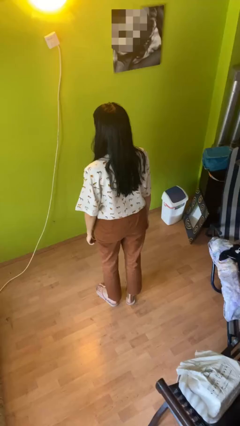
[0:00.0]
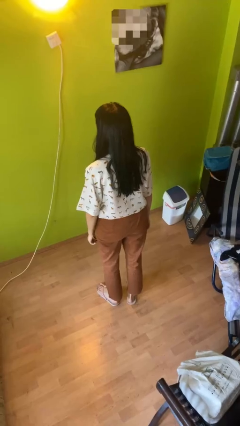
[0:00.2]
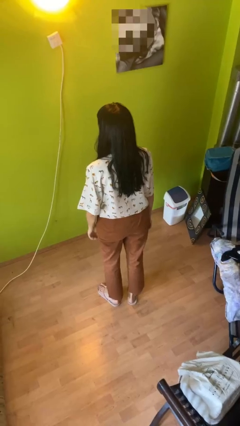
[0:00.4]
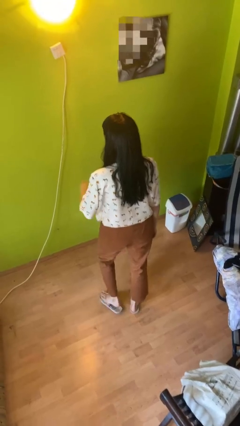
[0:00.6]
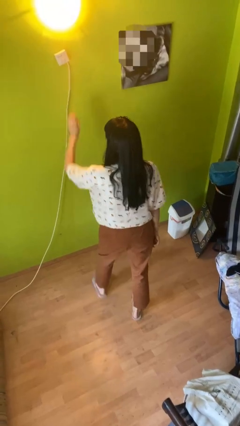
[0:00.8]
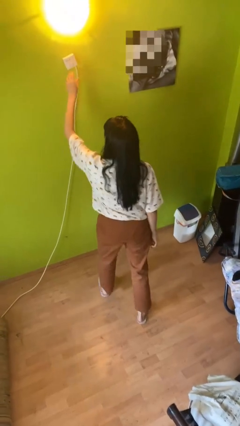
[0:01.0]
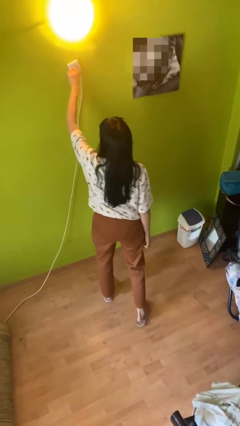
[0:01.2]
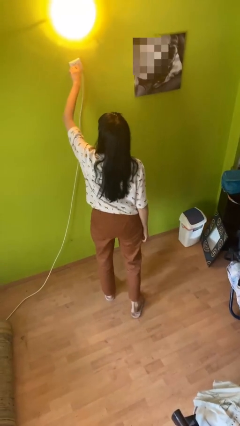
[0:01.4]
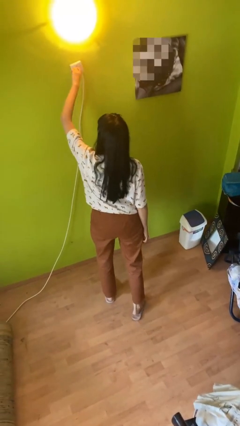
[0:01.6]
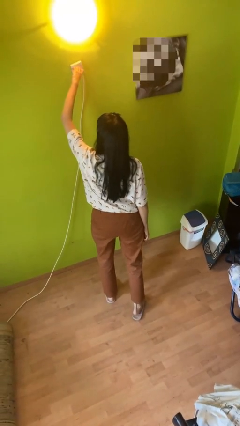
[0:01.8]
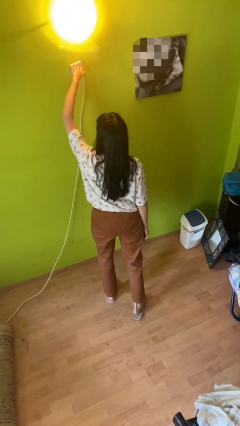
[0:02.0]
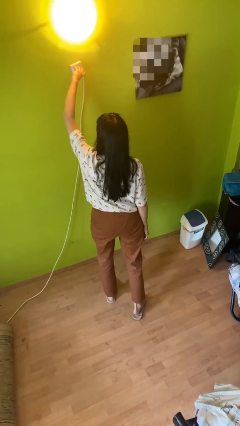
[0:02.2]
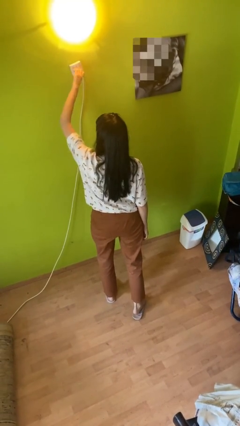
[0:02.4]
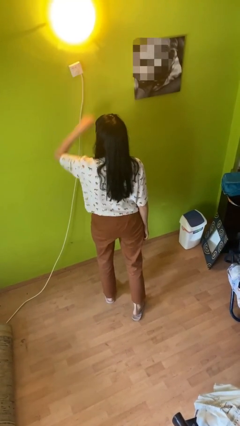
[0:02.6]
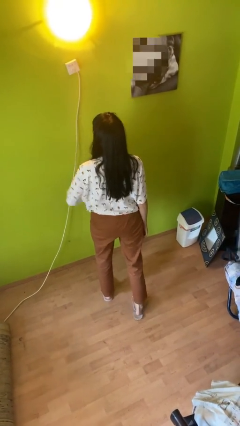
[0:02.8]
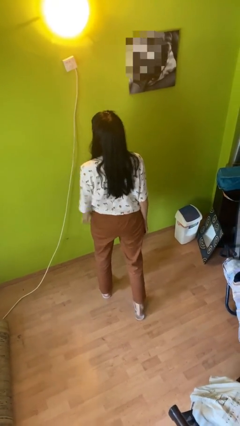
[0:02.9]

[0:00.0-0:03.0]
person adjusts thermostat

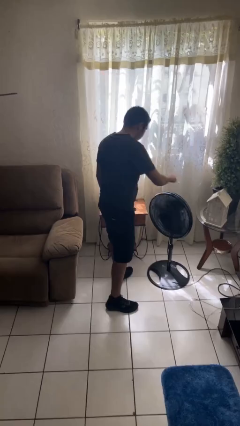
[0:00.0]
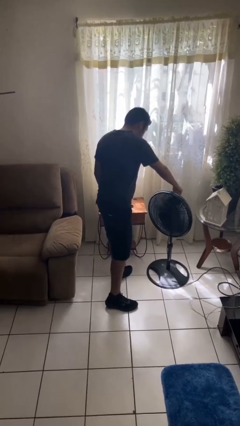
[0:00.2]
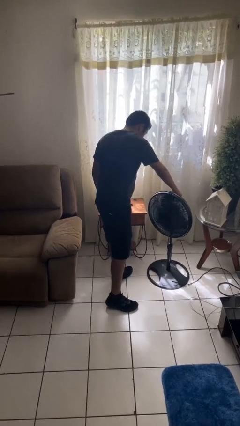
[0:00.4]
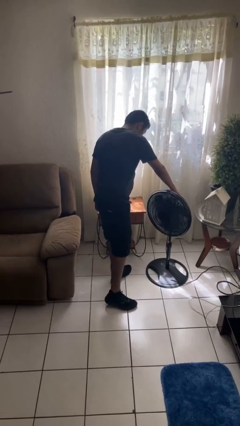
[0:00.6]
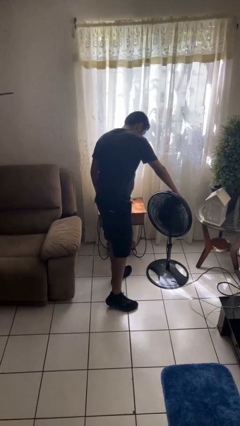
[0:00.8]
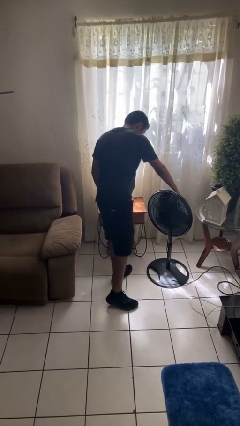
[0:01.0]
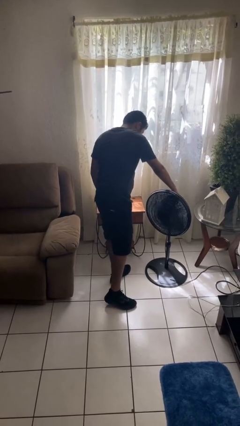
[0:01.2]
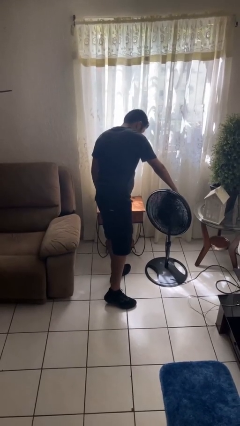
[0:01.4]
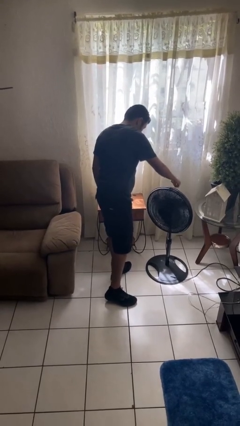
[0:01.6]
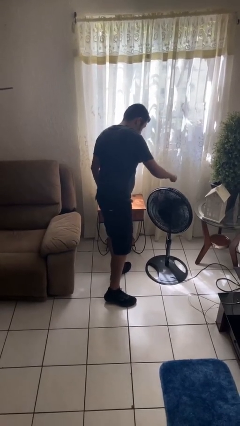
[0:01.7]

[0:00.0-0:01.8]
person turns on fan

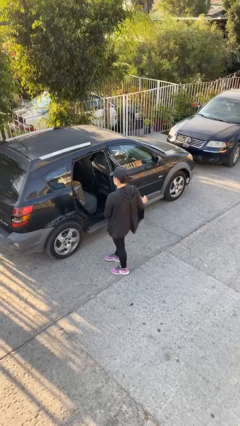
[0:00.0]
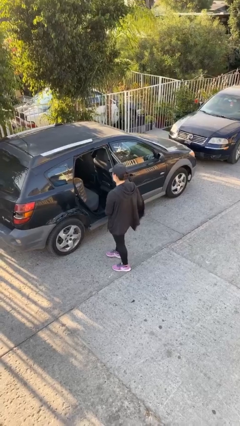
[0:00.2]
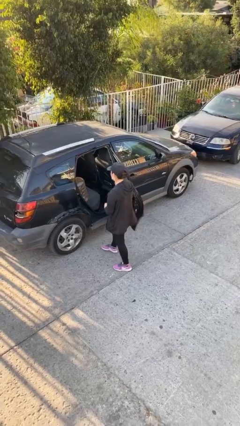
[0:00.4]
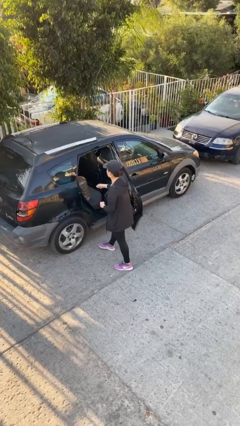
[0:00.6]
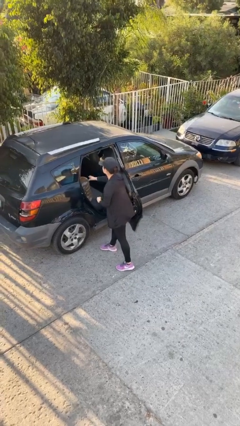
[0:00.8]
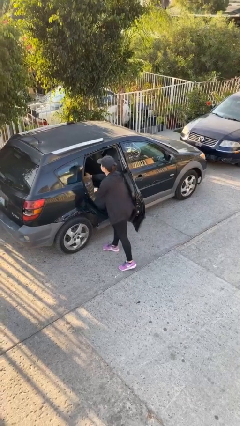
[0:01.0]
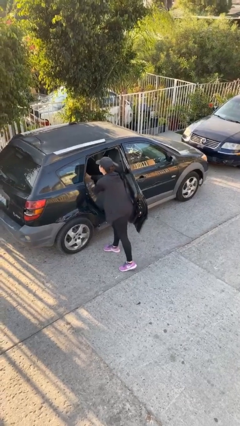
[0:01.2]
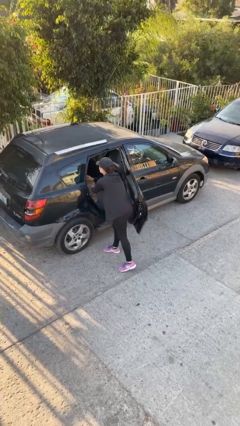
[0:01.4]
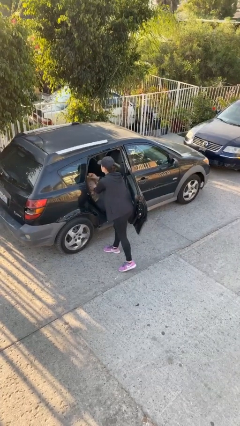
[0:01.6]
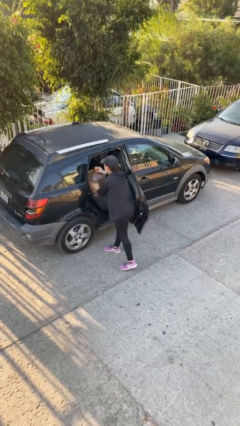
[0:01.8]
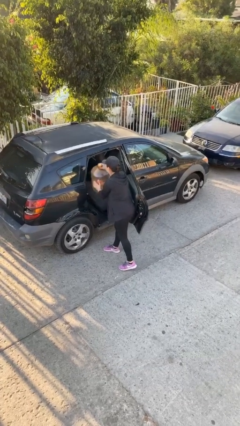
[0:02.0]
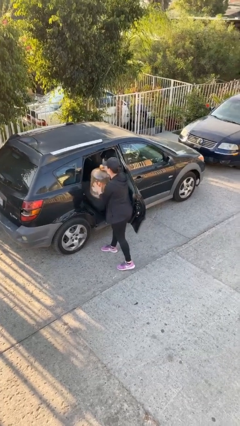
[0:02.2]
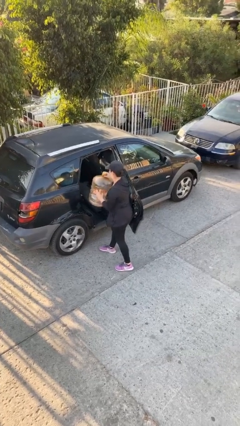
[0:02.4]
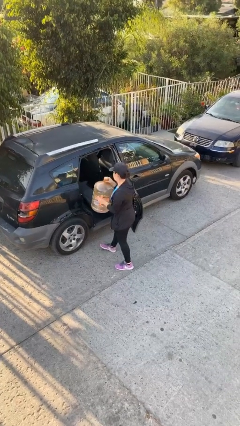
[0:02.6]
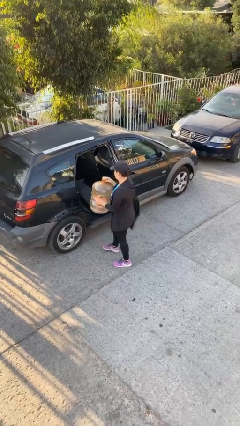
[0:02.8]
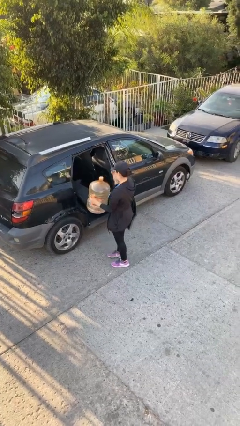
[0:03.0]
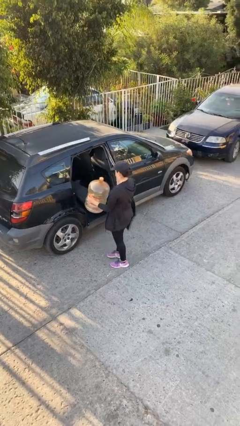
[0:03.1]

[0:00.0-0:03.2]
person unloads car

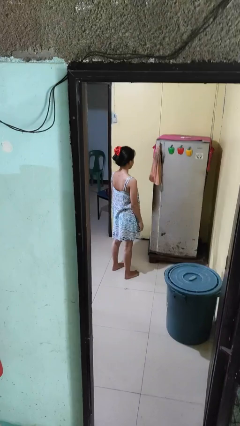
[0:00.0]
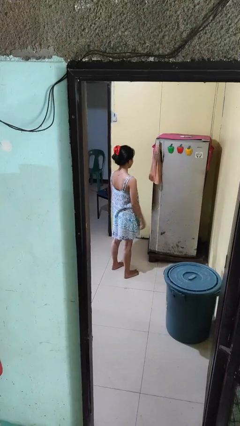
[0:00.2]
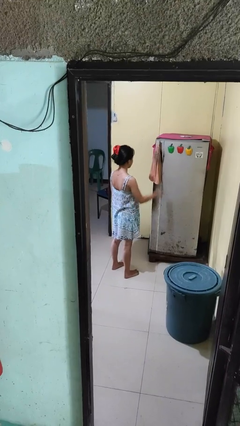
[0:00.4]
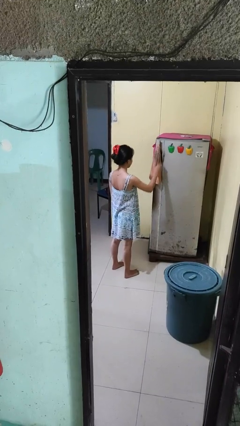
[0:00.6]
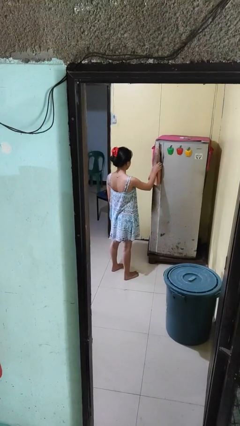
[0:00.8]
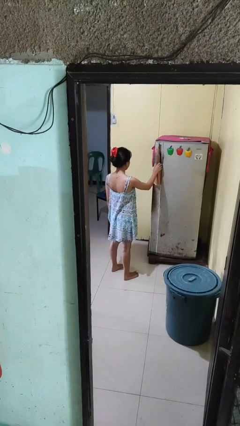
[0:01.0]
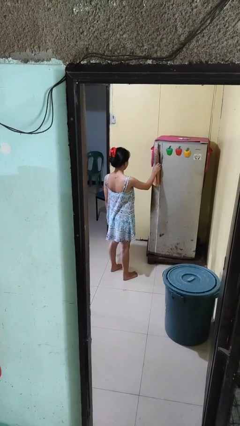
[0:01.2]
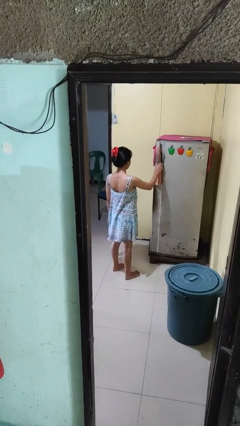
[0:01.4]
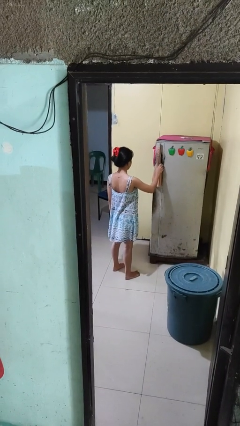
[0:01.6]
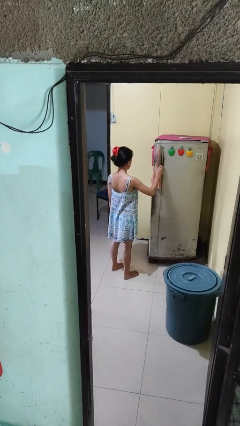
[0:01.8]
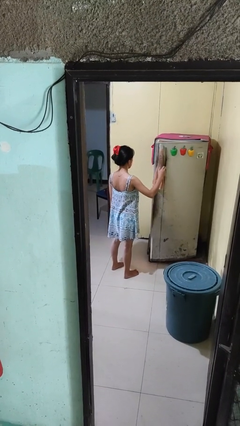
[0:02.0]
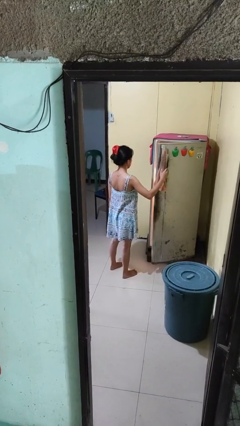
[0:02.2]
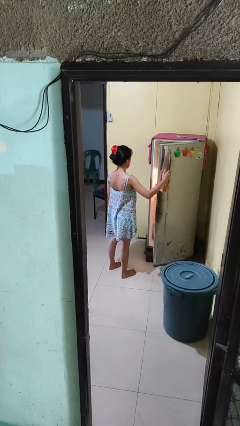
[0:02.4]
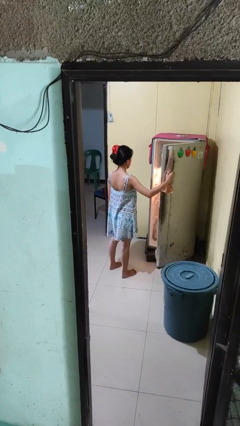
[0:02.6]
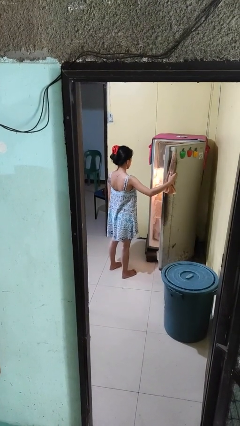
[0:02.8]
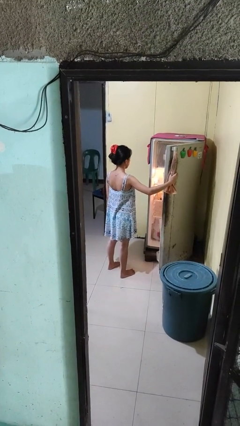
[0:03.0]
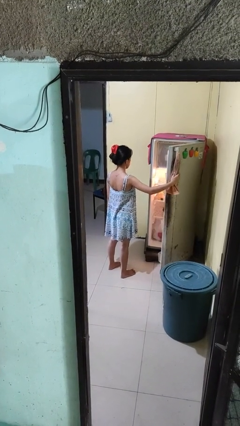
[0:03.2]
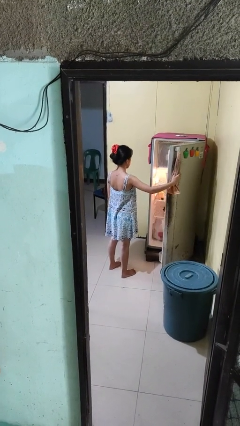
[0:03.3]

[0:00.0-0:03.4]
person opens refrigerator

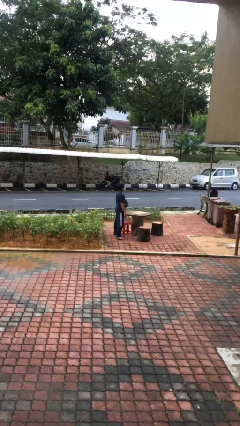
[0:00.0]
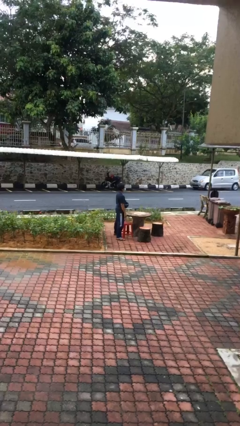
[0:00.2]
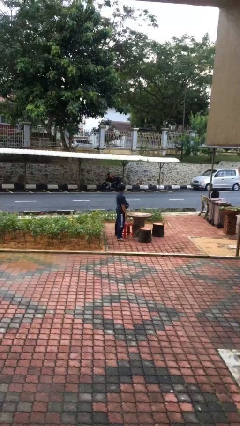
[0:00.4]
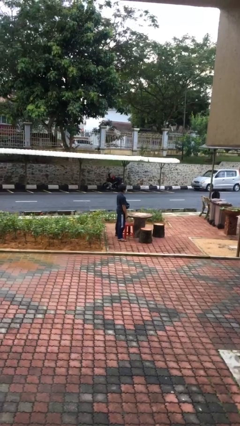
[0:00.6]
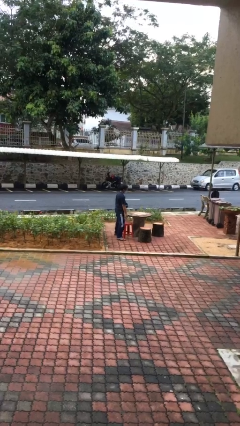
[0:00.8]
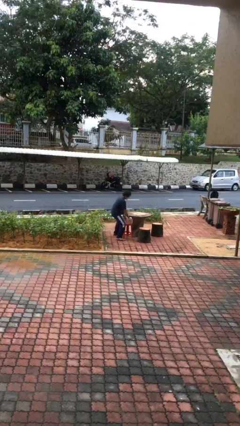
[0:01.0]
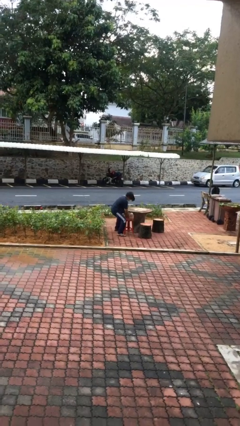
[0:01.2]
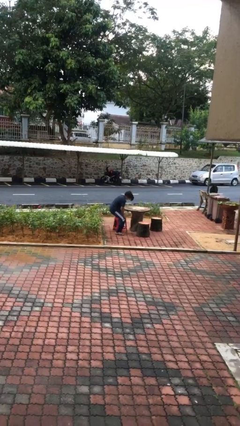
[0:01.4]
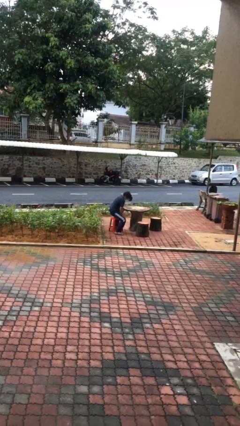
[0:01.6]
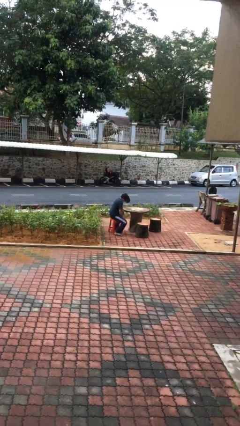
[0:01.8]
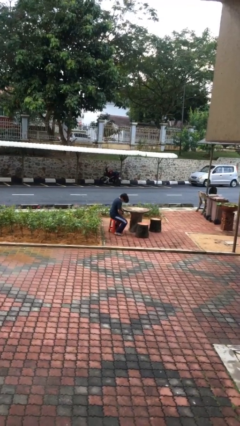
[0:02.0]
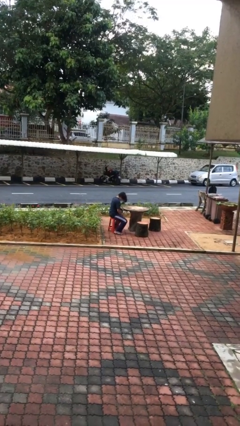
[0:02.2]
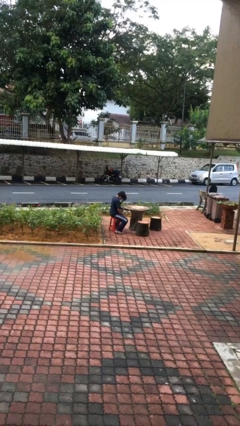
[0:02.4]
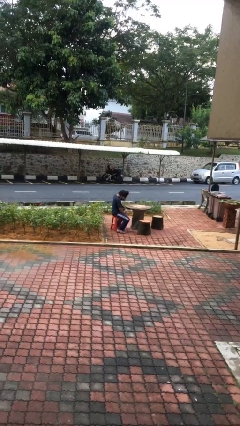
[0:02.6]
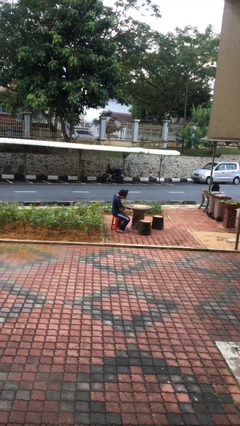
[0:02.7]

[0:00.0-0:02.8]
person sits down

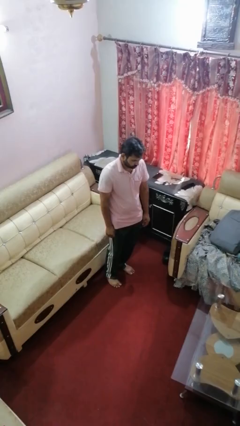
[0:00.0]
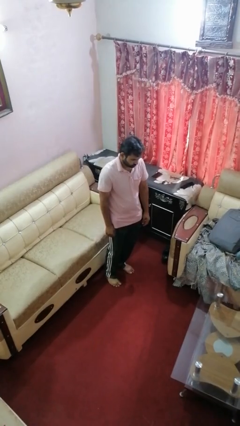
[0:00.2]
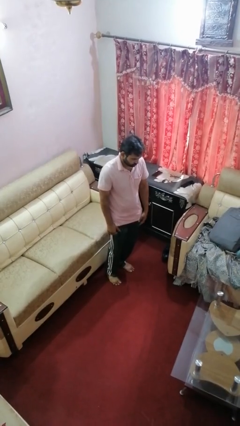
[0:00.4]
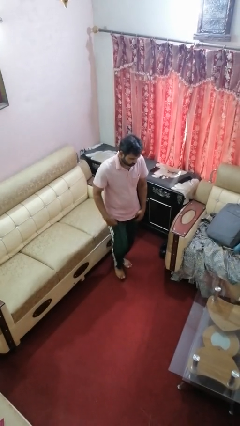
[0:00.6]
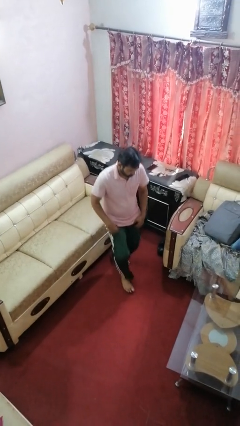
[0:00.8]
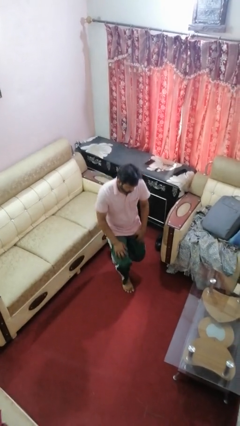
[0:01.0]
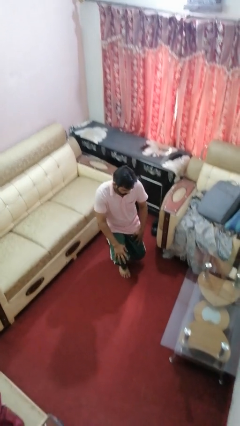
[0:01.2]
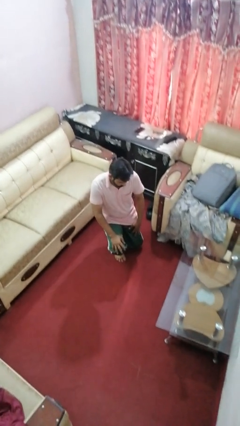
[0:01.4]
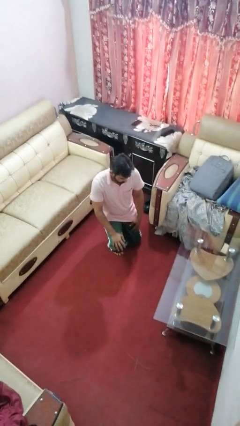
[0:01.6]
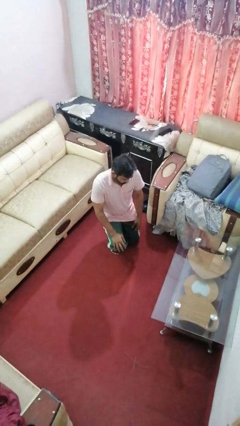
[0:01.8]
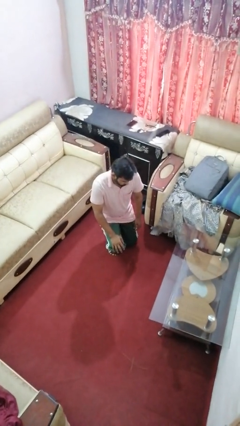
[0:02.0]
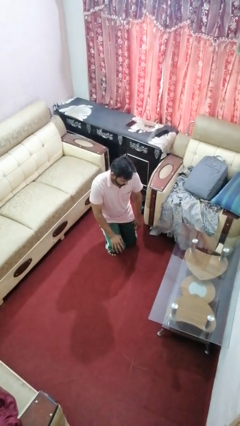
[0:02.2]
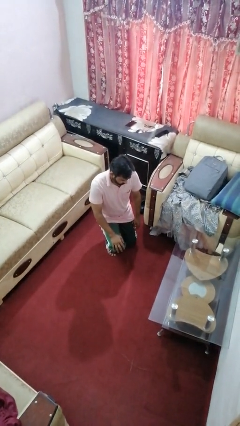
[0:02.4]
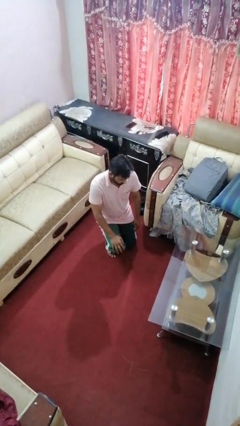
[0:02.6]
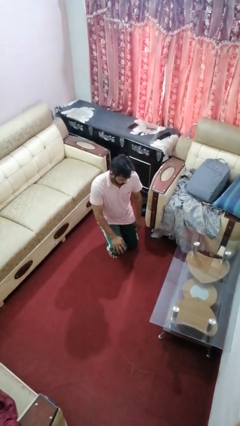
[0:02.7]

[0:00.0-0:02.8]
person kneels

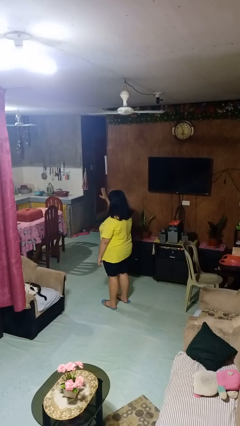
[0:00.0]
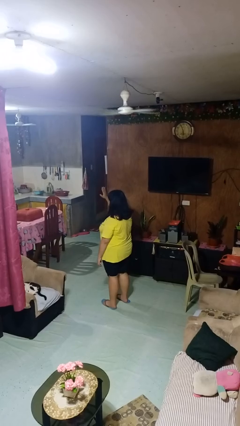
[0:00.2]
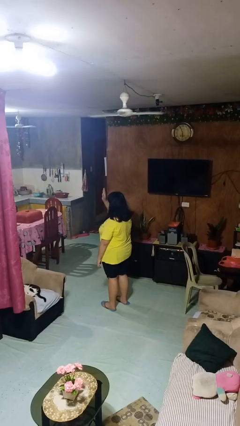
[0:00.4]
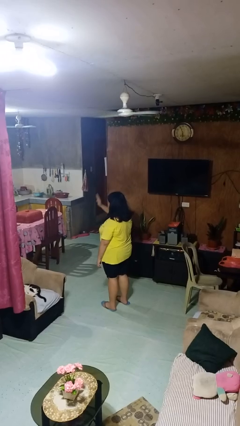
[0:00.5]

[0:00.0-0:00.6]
person gestures swipe down
